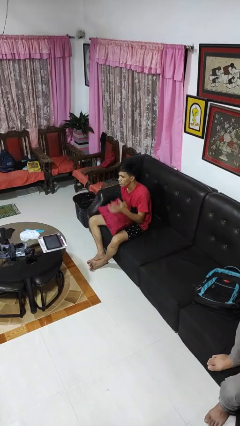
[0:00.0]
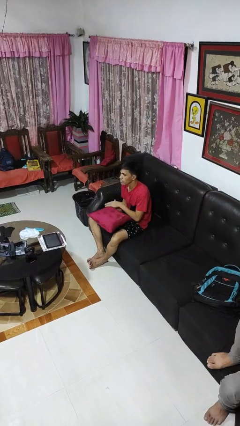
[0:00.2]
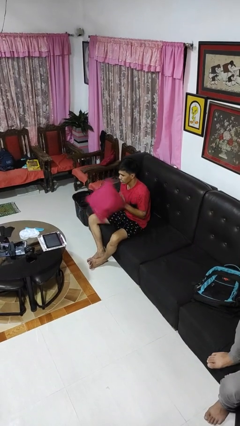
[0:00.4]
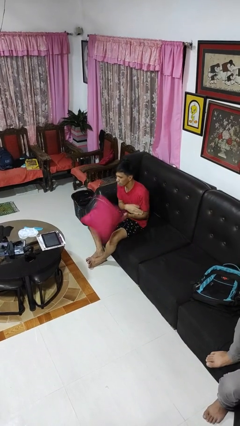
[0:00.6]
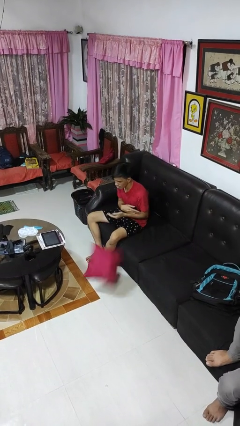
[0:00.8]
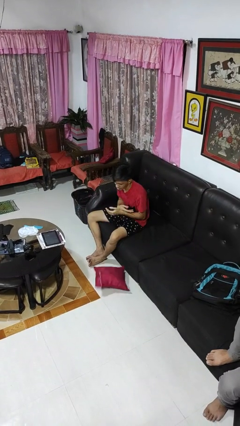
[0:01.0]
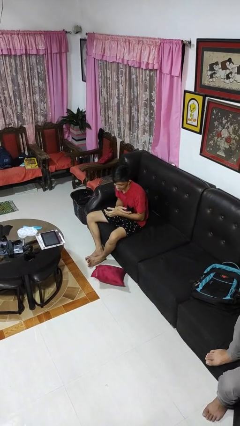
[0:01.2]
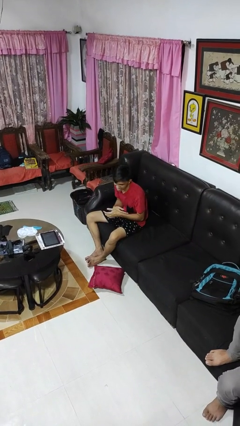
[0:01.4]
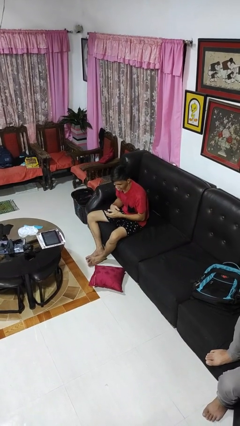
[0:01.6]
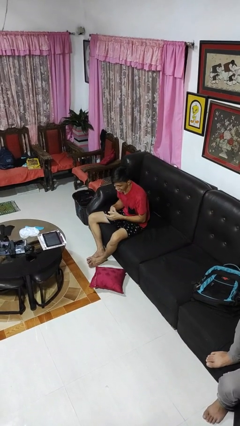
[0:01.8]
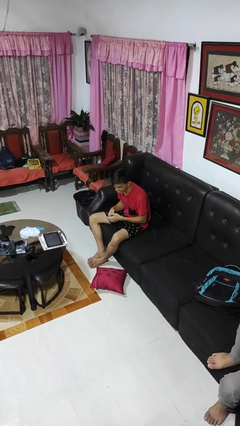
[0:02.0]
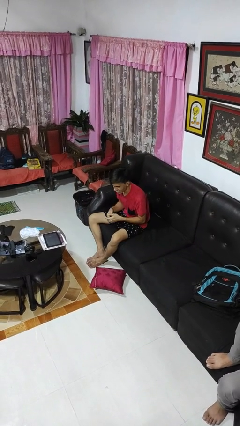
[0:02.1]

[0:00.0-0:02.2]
person drops object

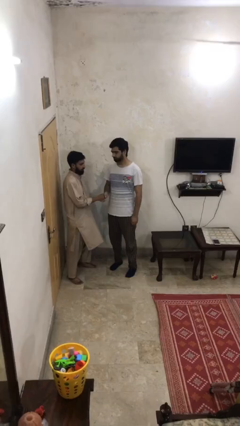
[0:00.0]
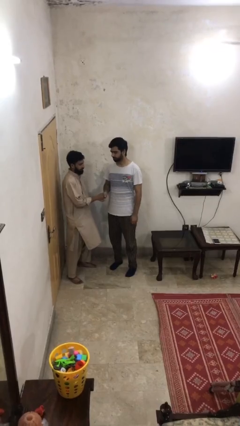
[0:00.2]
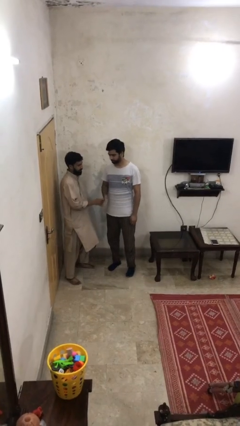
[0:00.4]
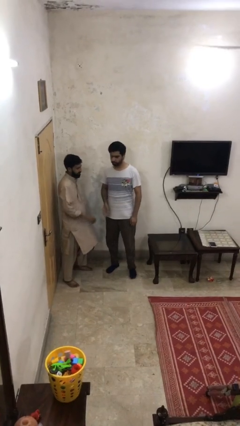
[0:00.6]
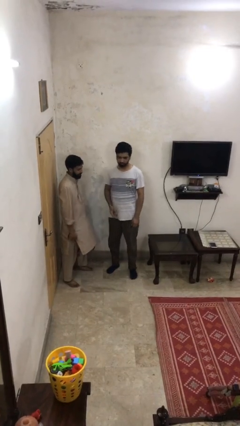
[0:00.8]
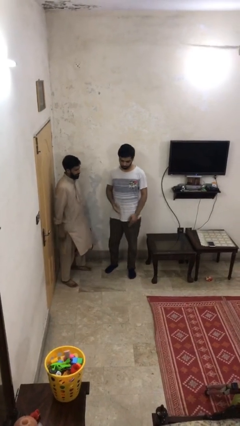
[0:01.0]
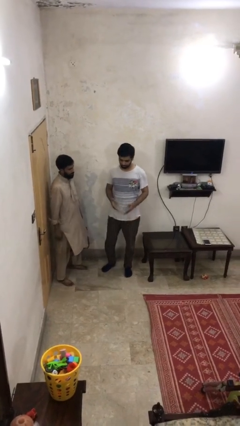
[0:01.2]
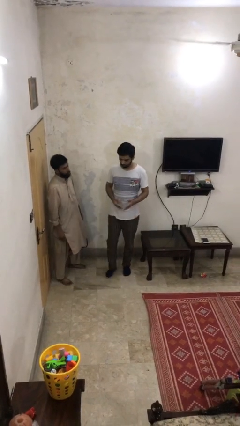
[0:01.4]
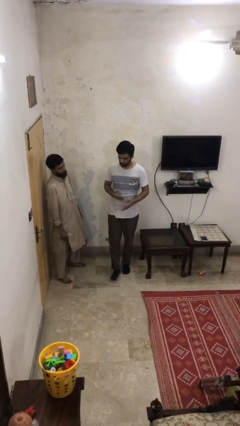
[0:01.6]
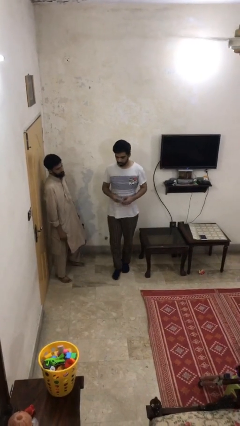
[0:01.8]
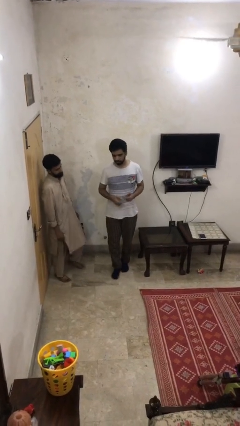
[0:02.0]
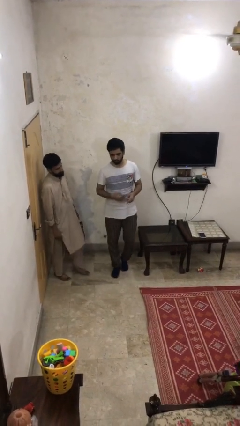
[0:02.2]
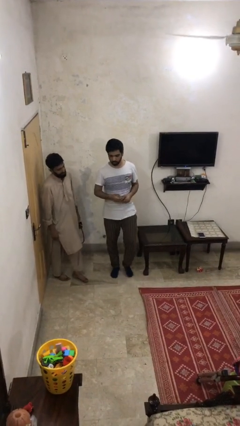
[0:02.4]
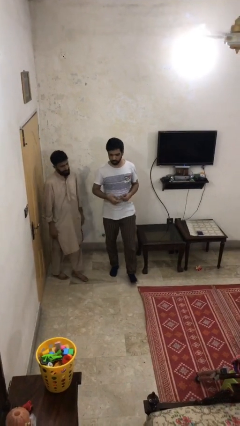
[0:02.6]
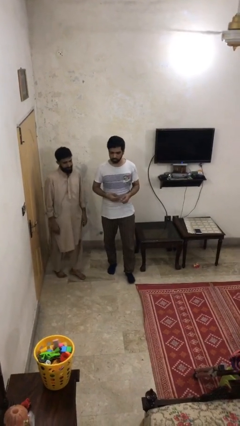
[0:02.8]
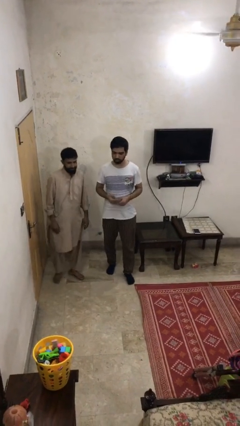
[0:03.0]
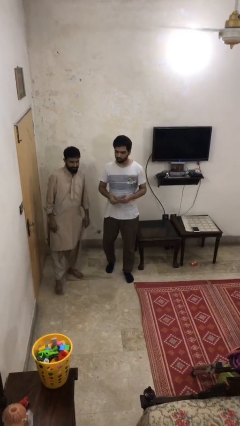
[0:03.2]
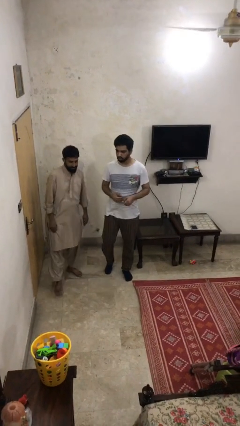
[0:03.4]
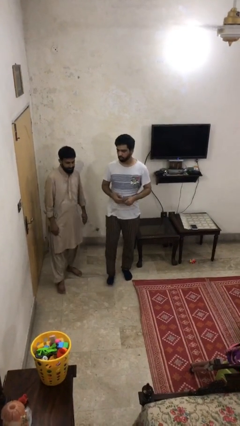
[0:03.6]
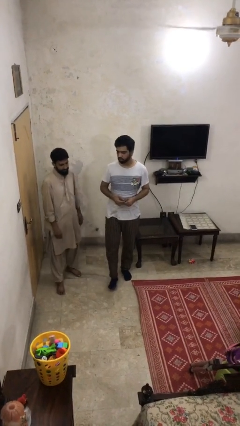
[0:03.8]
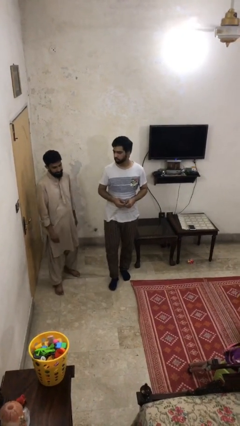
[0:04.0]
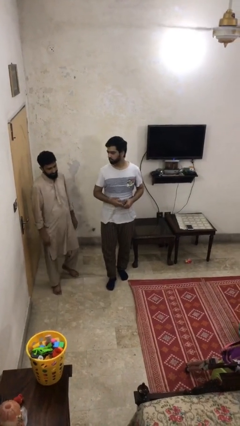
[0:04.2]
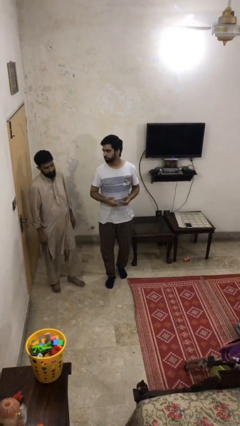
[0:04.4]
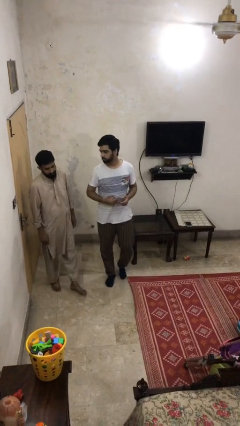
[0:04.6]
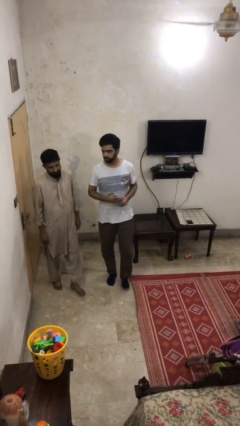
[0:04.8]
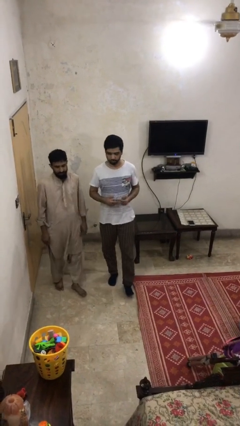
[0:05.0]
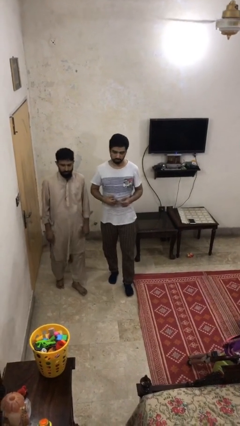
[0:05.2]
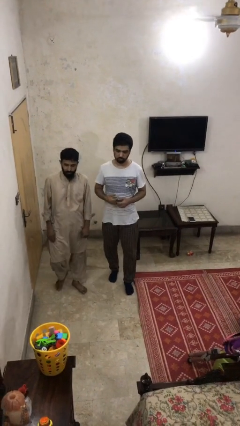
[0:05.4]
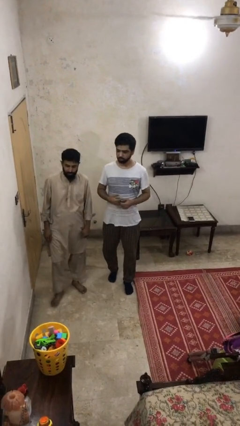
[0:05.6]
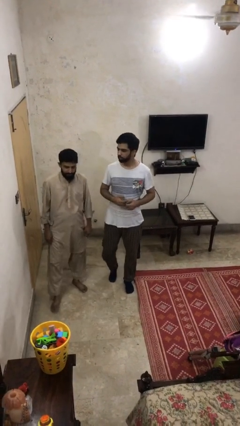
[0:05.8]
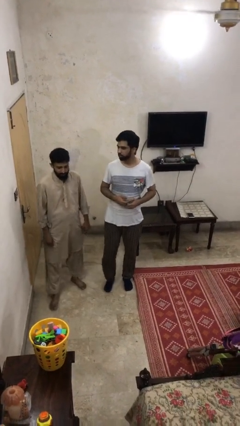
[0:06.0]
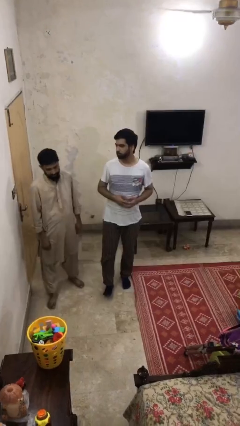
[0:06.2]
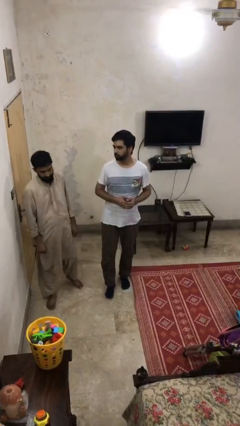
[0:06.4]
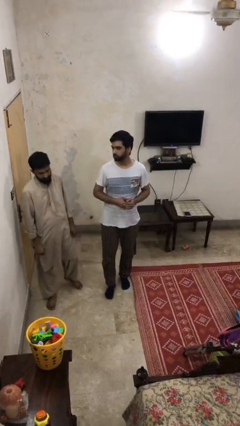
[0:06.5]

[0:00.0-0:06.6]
person talks to person

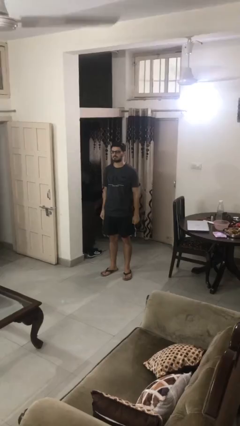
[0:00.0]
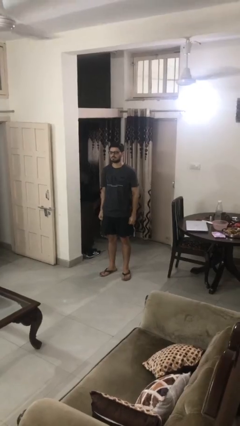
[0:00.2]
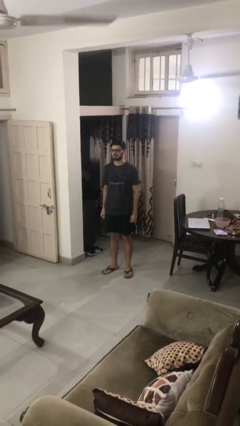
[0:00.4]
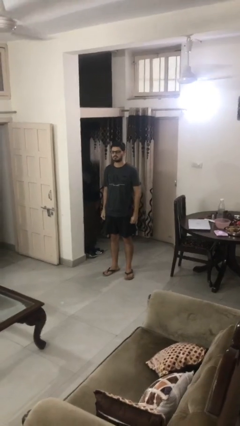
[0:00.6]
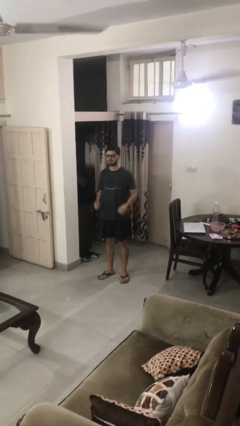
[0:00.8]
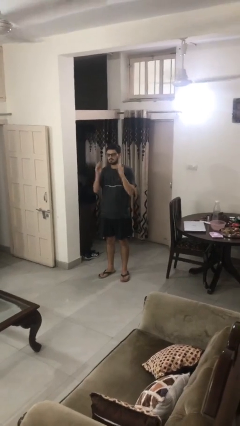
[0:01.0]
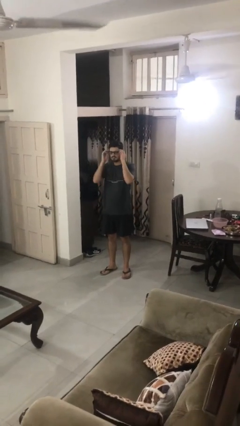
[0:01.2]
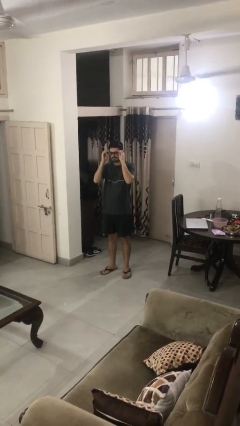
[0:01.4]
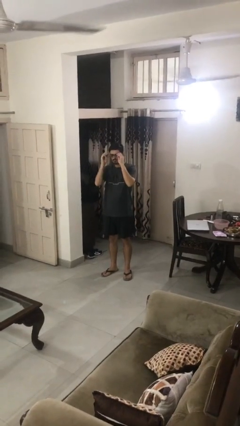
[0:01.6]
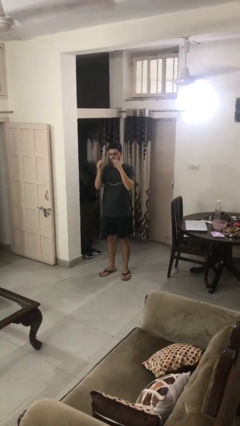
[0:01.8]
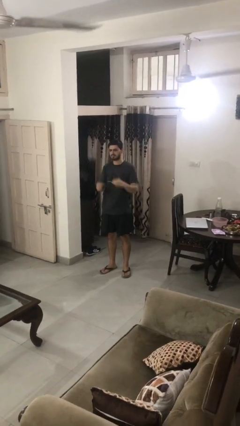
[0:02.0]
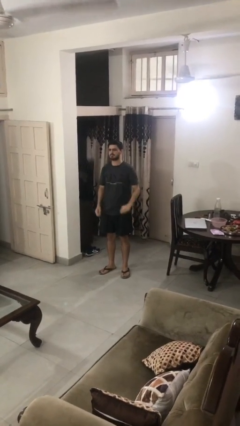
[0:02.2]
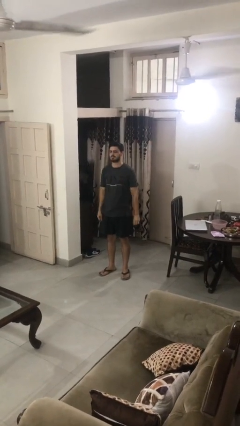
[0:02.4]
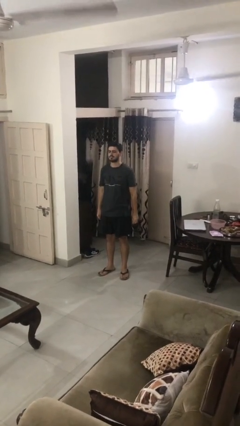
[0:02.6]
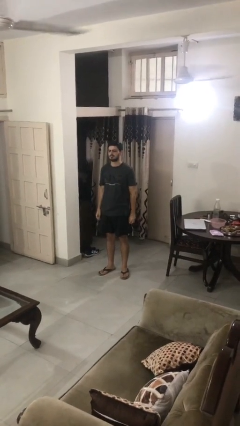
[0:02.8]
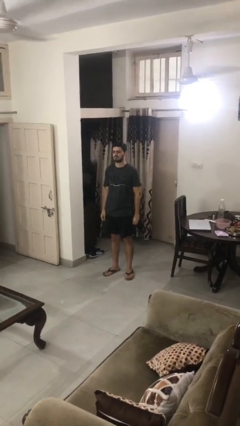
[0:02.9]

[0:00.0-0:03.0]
person takes off glasses

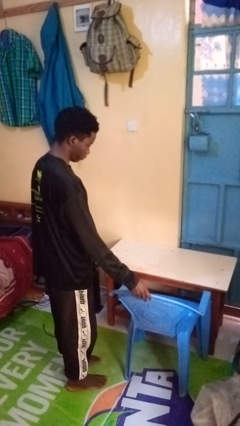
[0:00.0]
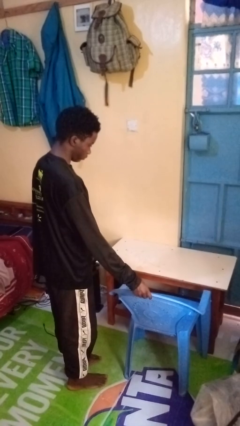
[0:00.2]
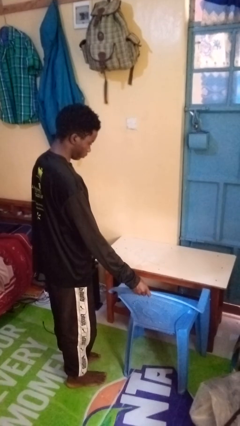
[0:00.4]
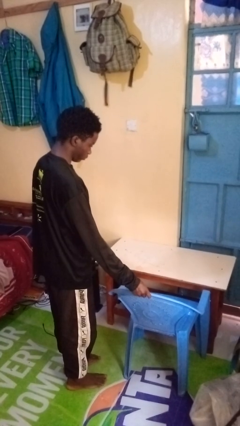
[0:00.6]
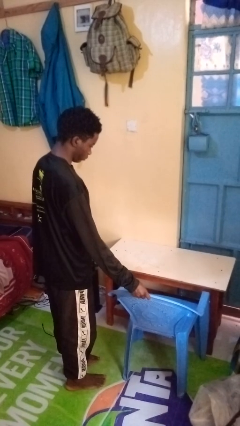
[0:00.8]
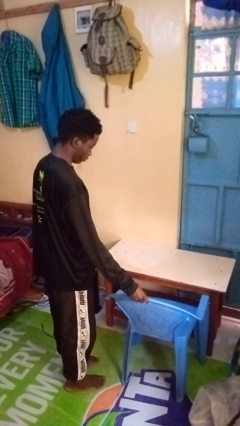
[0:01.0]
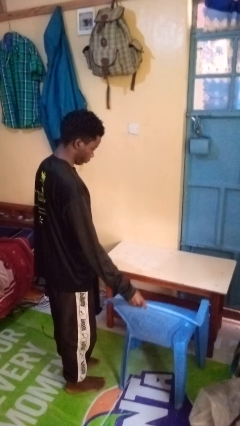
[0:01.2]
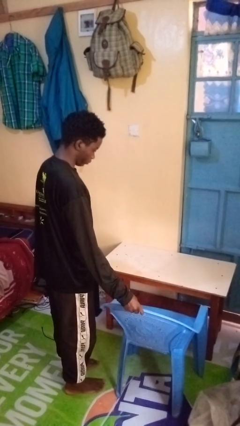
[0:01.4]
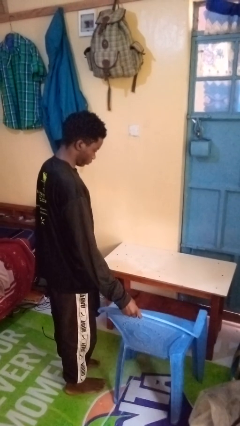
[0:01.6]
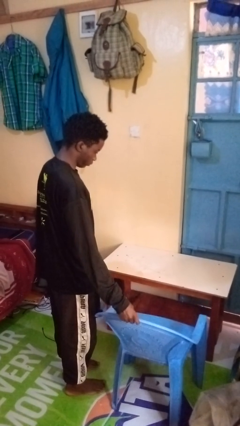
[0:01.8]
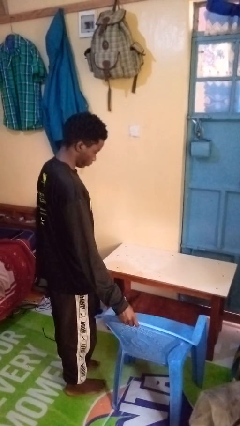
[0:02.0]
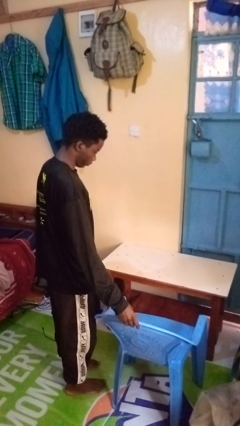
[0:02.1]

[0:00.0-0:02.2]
person pulls out chair

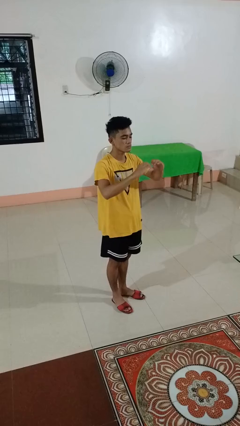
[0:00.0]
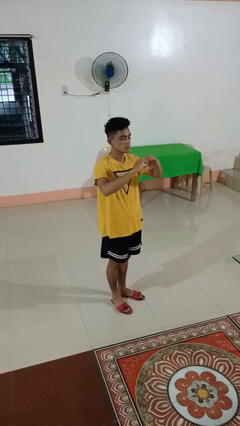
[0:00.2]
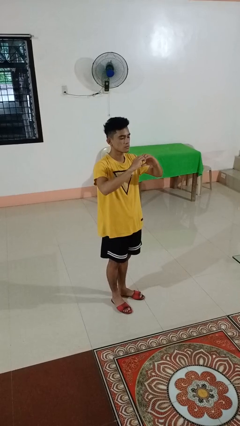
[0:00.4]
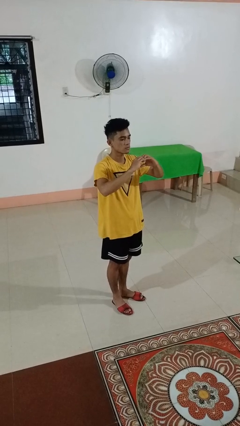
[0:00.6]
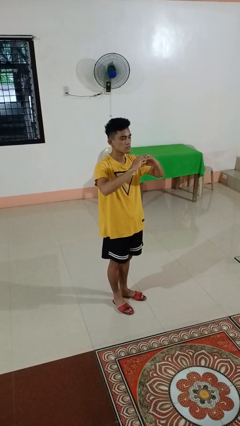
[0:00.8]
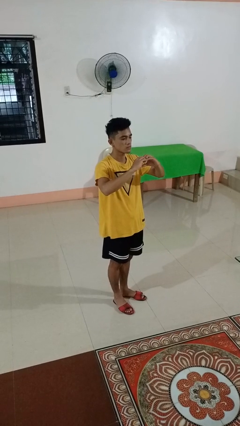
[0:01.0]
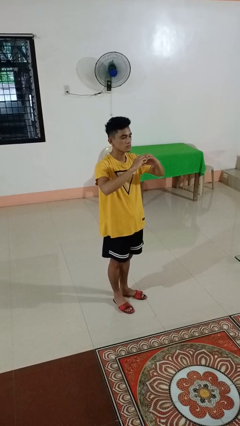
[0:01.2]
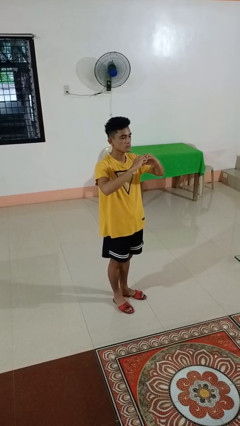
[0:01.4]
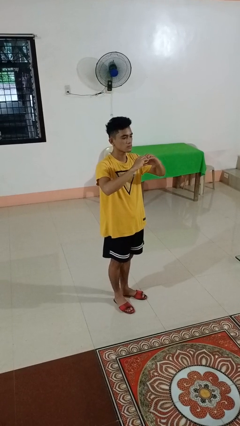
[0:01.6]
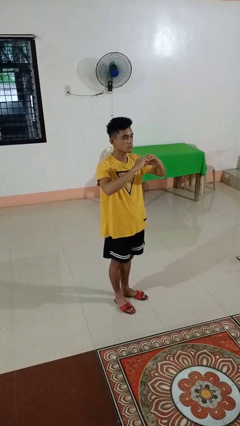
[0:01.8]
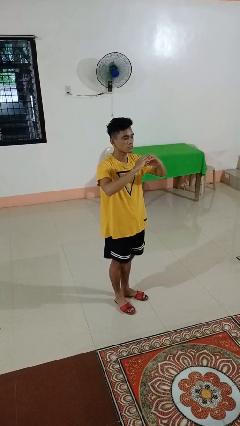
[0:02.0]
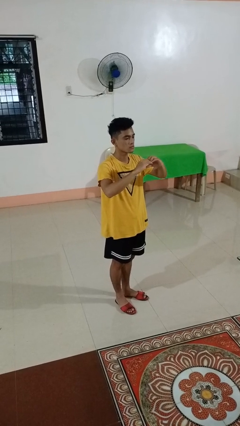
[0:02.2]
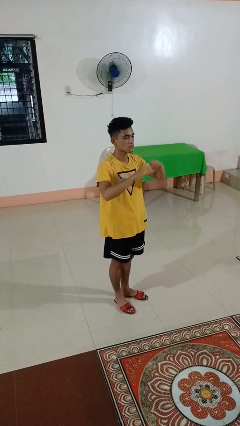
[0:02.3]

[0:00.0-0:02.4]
person gestures heart

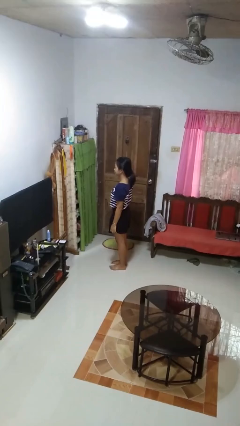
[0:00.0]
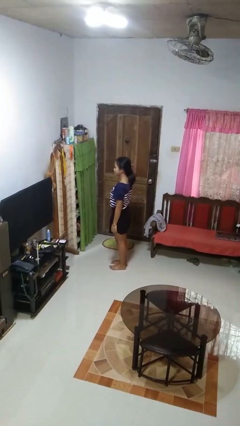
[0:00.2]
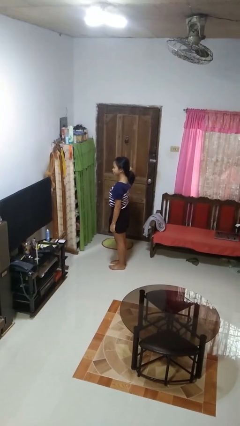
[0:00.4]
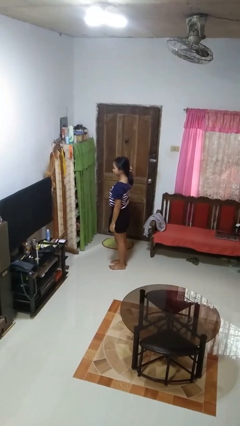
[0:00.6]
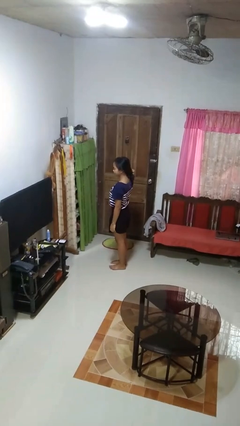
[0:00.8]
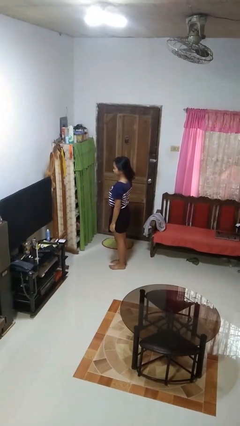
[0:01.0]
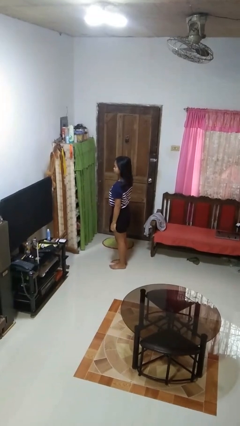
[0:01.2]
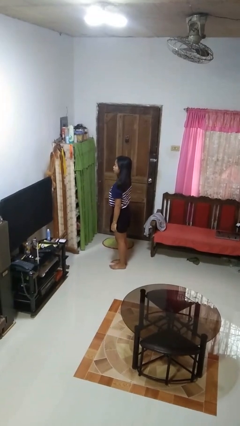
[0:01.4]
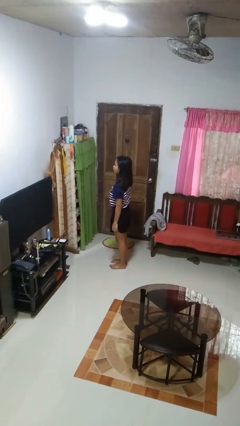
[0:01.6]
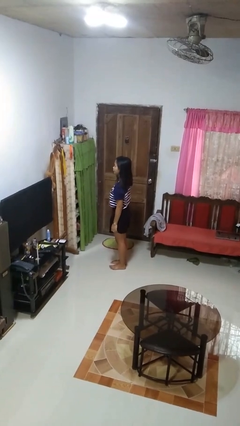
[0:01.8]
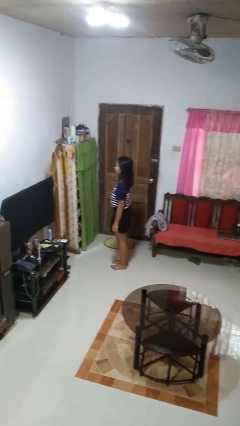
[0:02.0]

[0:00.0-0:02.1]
person takes off hairtie
